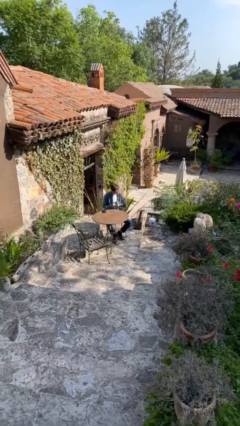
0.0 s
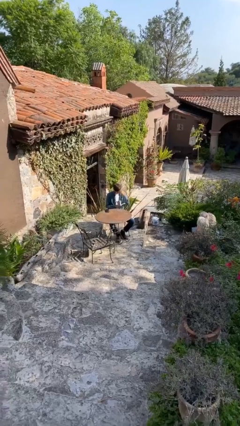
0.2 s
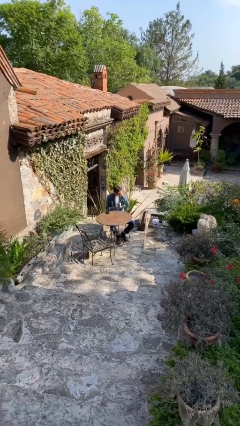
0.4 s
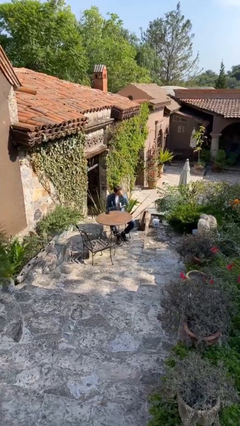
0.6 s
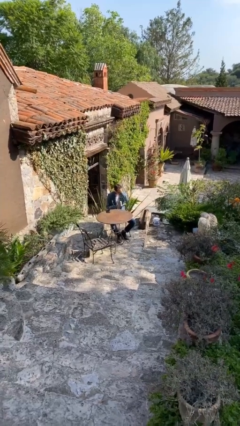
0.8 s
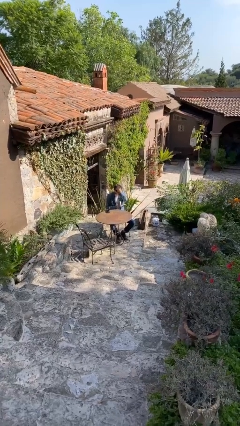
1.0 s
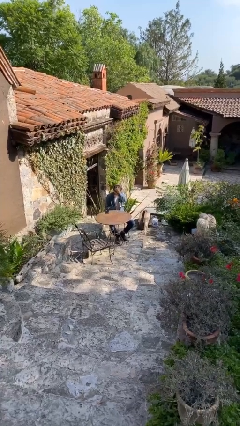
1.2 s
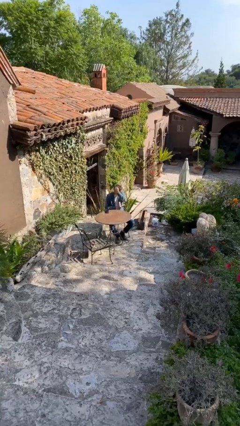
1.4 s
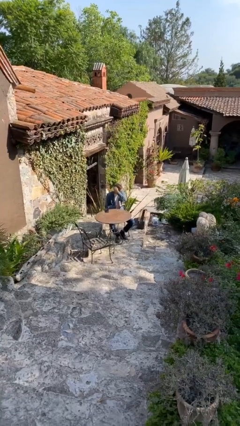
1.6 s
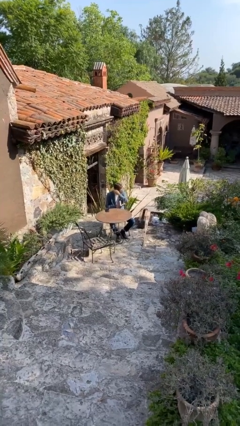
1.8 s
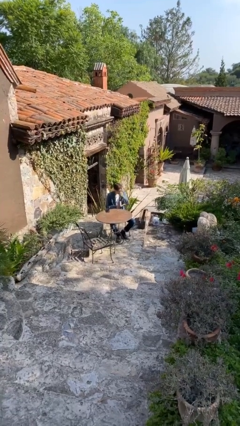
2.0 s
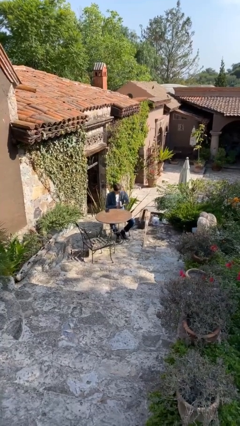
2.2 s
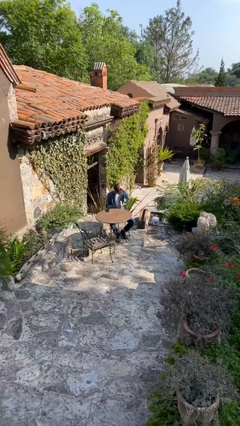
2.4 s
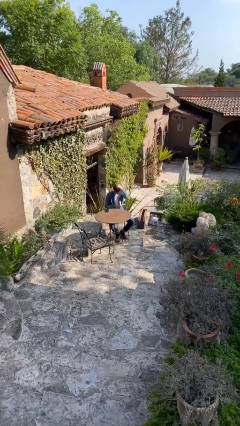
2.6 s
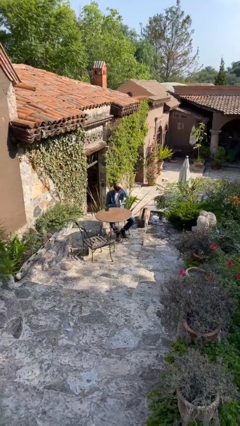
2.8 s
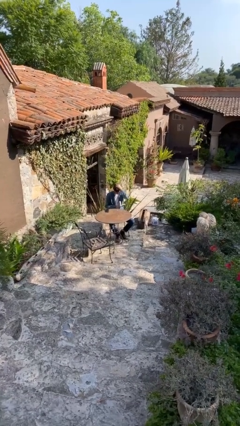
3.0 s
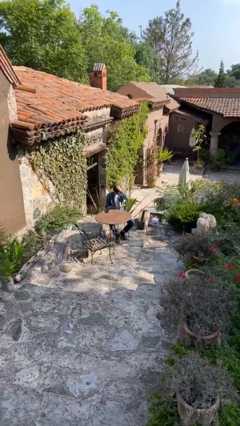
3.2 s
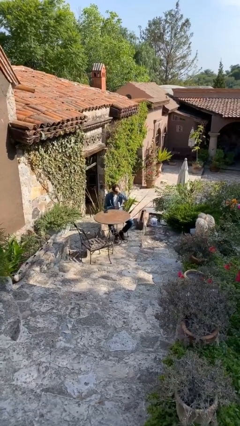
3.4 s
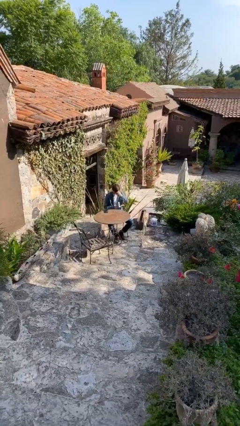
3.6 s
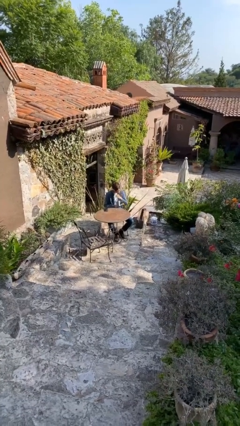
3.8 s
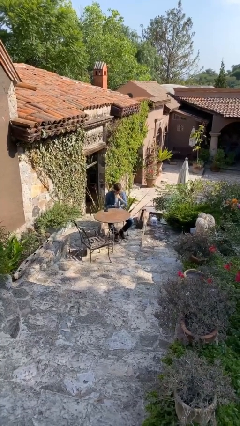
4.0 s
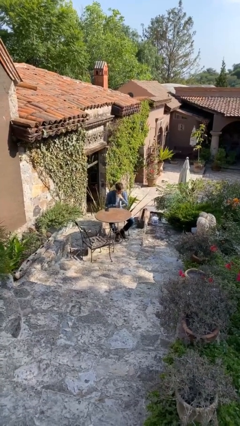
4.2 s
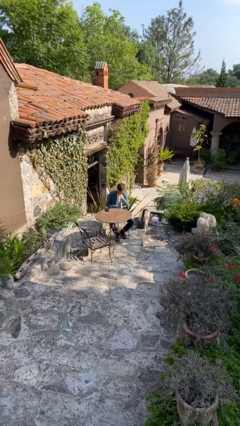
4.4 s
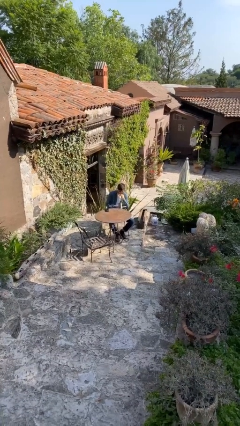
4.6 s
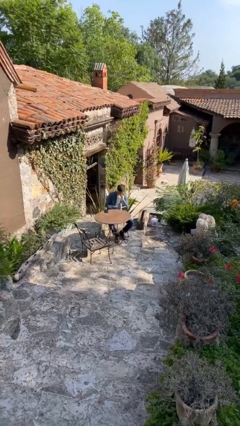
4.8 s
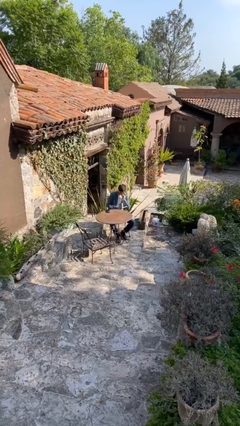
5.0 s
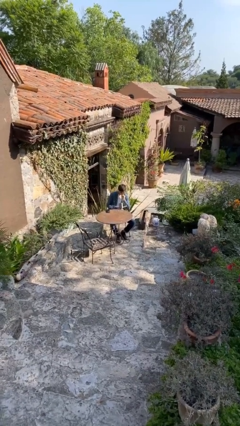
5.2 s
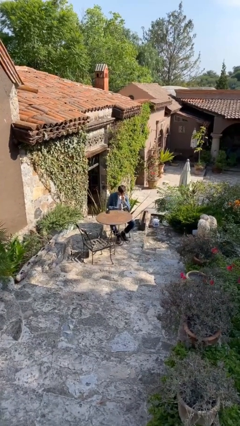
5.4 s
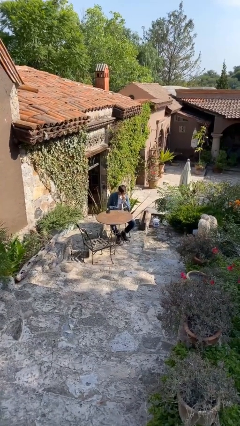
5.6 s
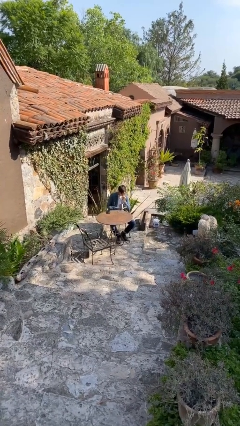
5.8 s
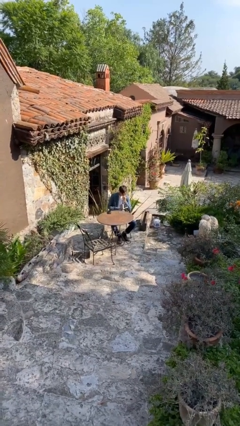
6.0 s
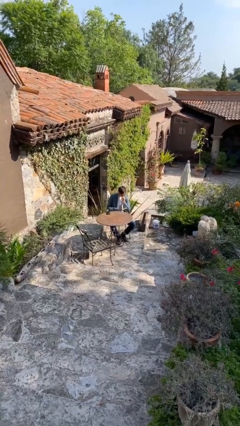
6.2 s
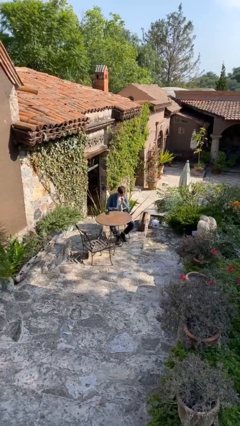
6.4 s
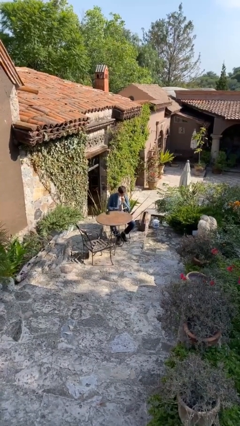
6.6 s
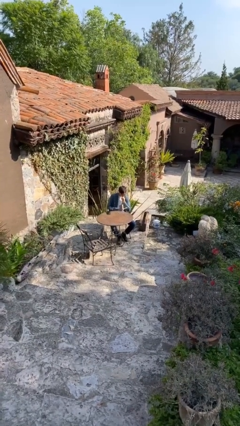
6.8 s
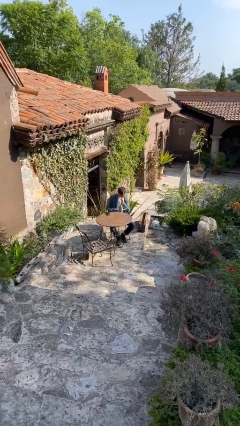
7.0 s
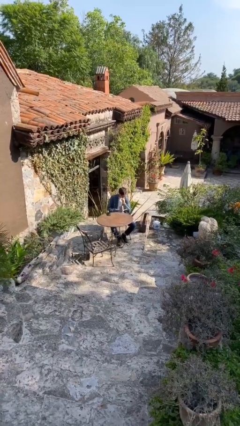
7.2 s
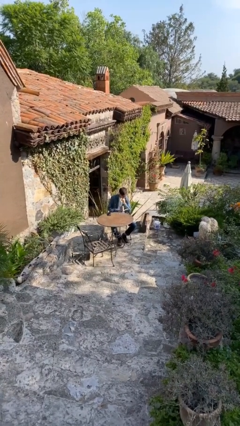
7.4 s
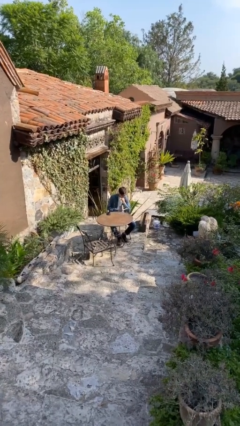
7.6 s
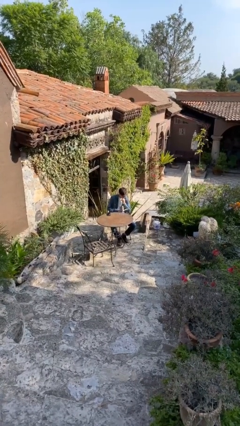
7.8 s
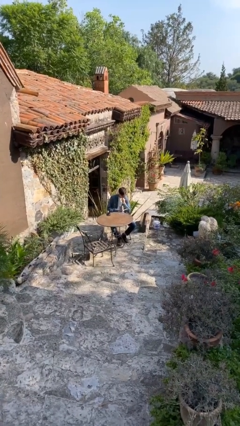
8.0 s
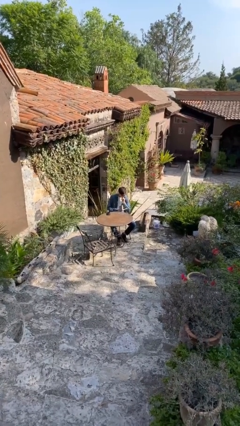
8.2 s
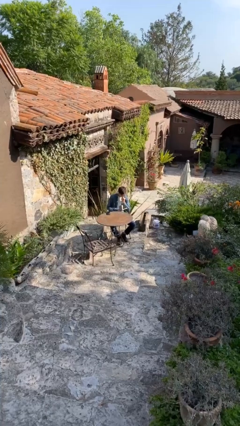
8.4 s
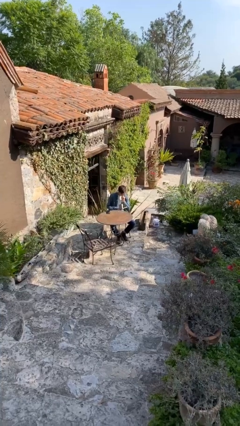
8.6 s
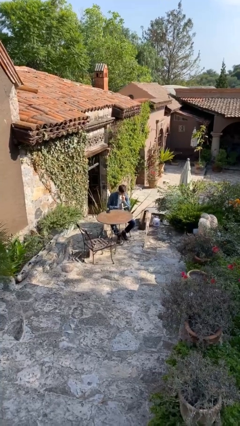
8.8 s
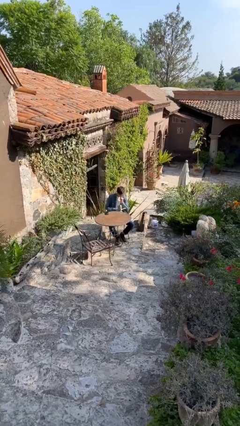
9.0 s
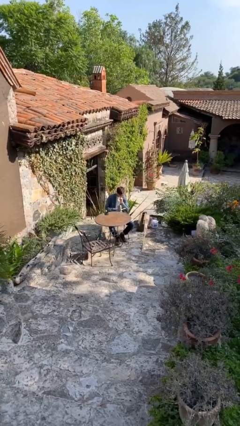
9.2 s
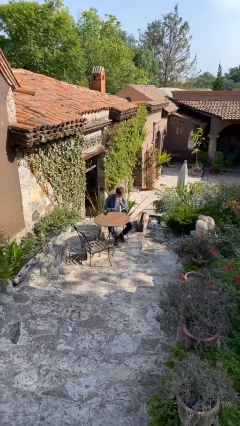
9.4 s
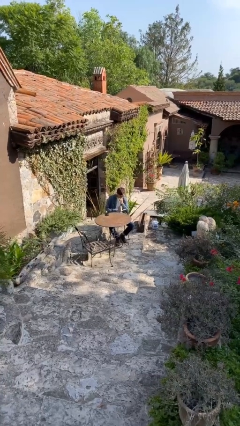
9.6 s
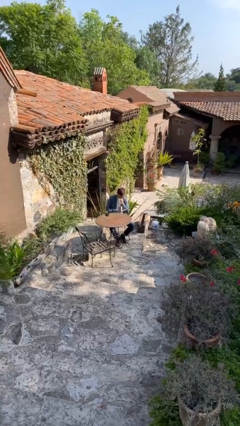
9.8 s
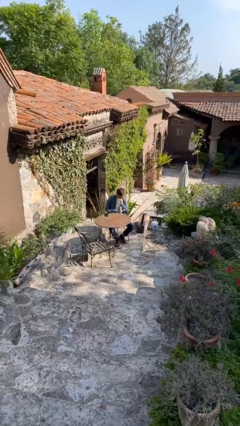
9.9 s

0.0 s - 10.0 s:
person reads document

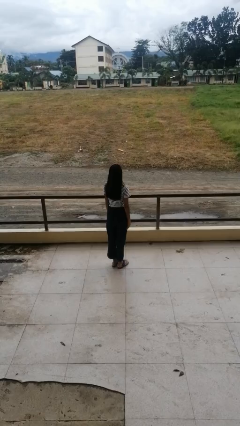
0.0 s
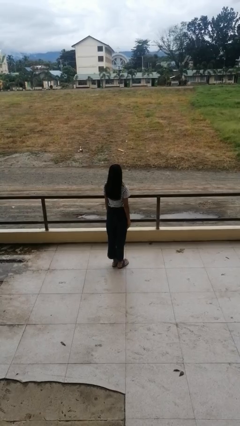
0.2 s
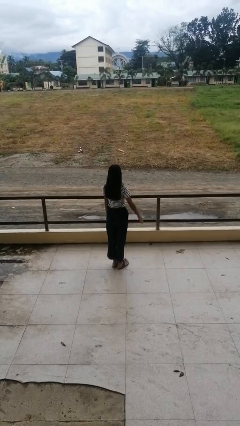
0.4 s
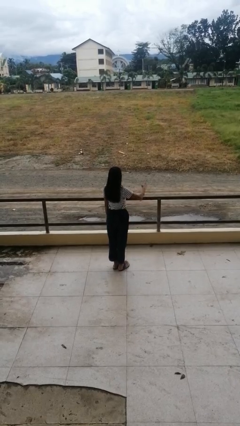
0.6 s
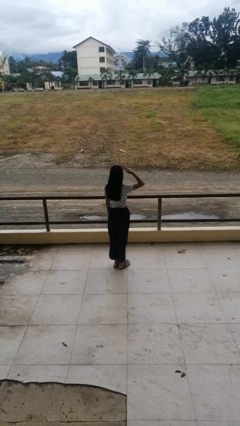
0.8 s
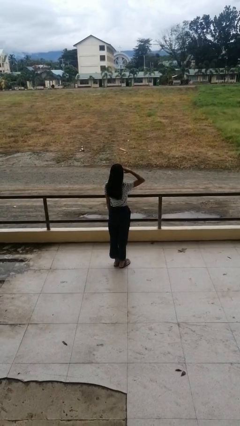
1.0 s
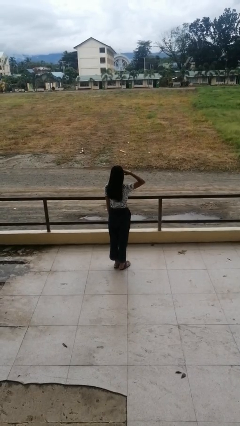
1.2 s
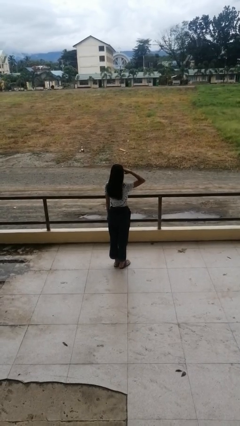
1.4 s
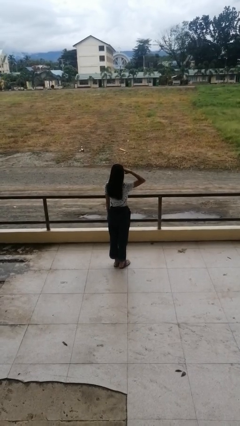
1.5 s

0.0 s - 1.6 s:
person salutes

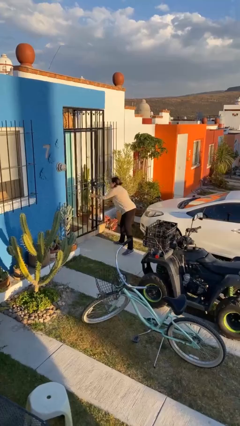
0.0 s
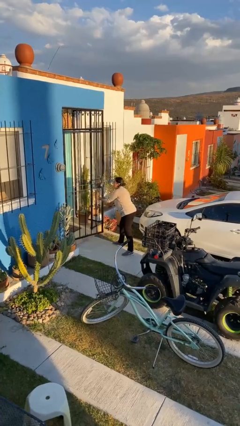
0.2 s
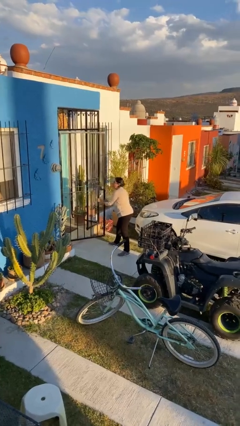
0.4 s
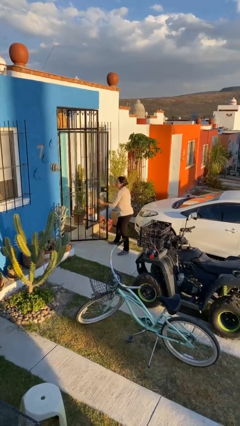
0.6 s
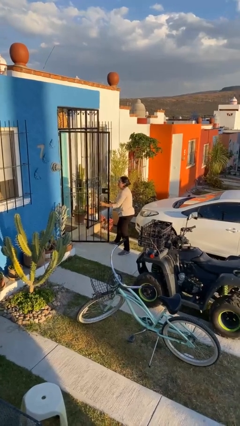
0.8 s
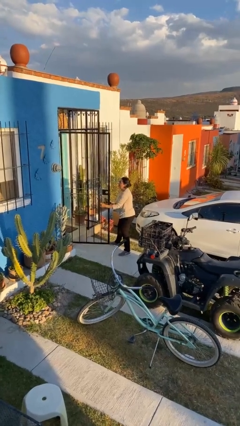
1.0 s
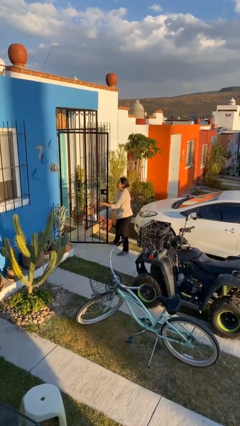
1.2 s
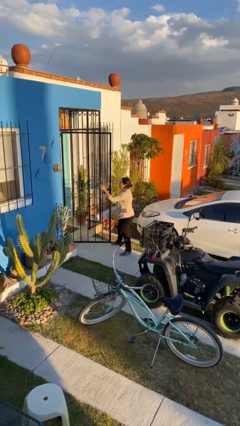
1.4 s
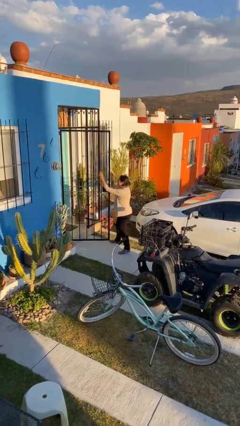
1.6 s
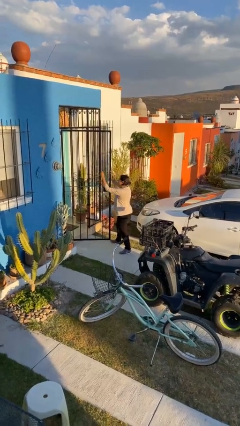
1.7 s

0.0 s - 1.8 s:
person opens facility door

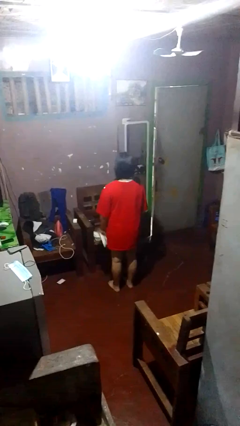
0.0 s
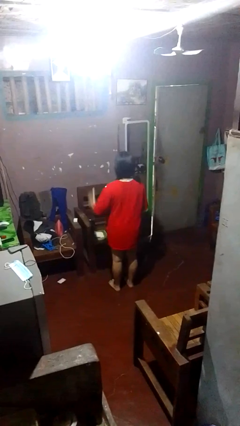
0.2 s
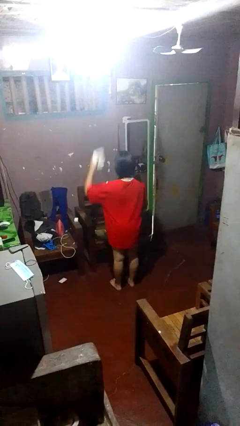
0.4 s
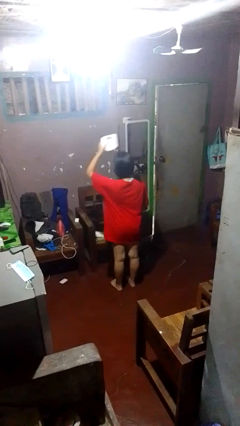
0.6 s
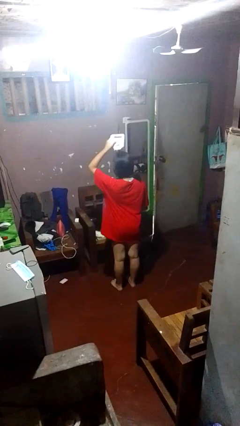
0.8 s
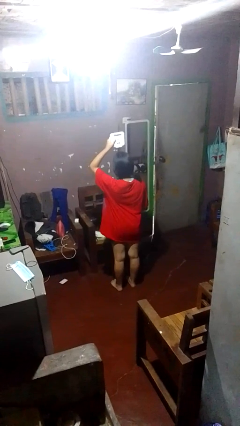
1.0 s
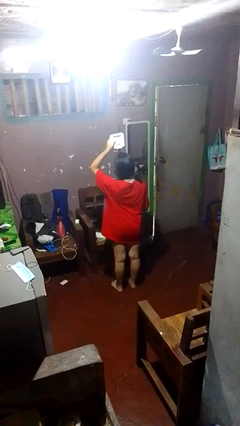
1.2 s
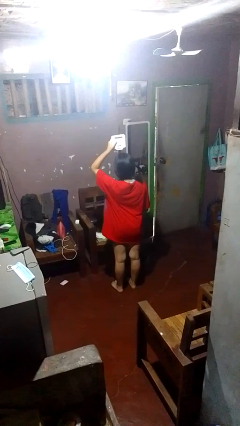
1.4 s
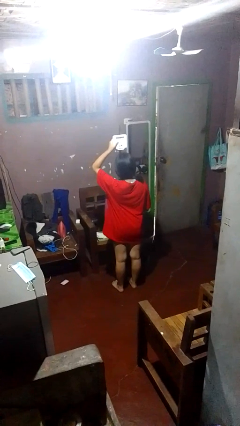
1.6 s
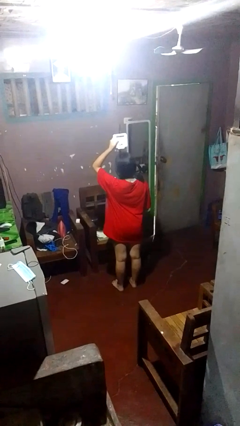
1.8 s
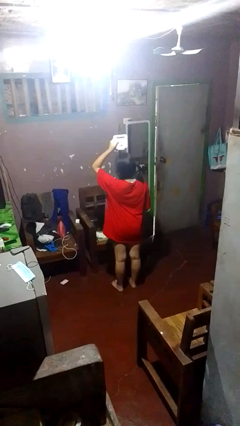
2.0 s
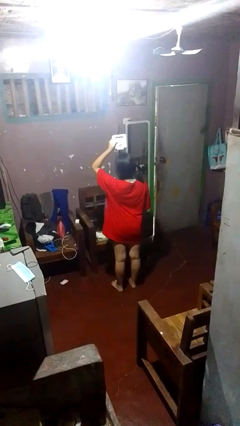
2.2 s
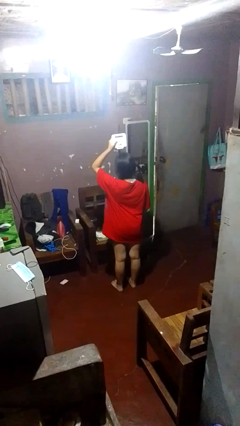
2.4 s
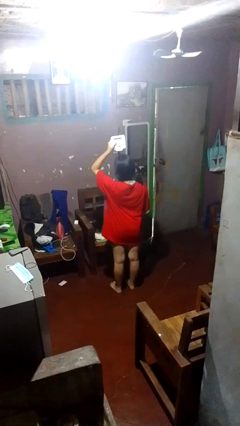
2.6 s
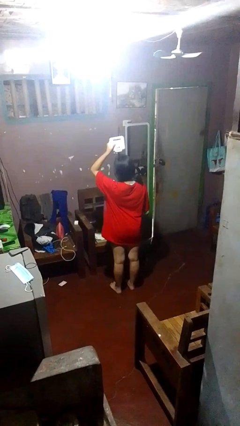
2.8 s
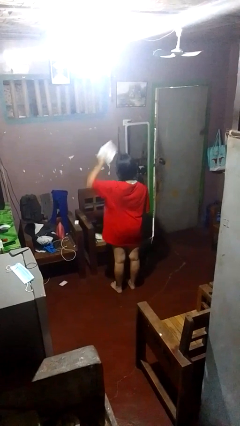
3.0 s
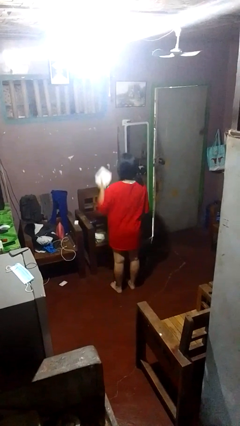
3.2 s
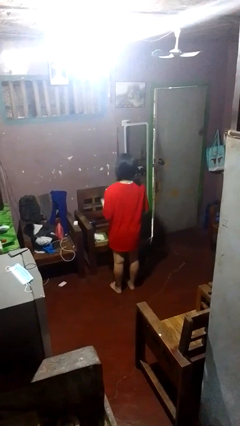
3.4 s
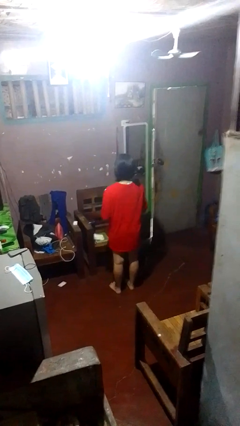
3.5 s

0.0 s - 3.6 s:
person holds object above head

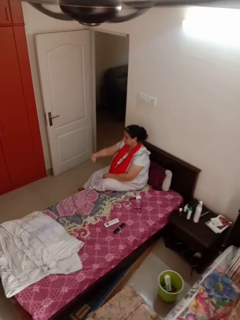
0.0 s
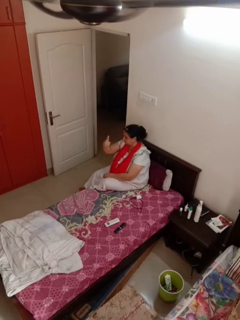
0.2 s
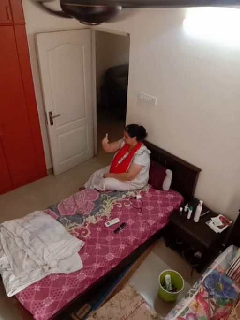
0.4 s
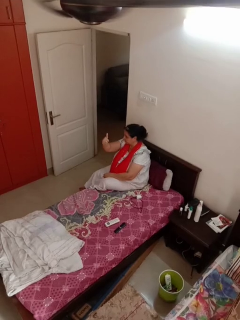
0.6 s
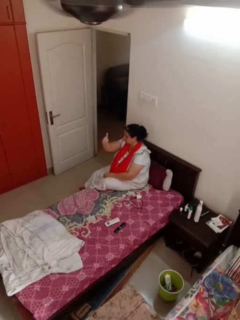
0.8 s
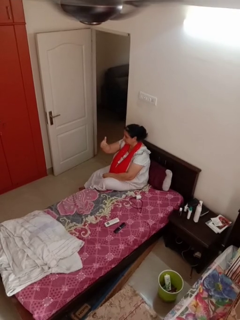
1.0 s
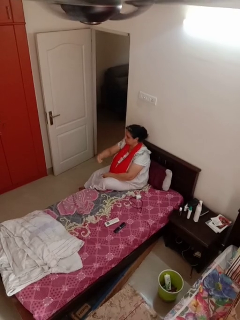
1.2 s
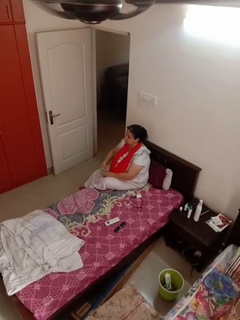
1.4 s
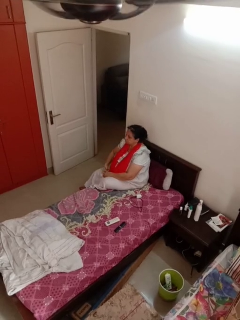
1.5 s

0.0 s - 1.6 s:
person gestures thumbs up
